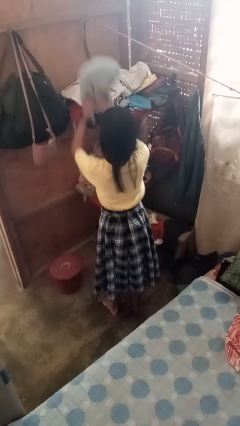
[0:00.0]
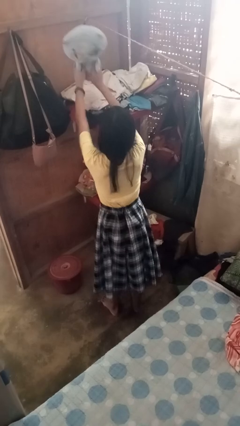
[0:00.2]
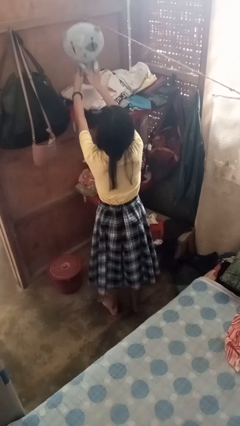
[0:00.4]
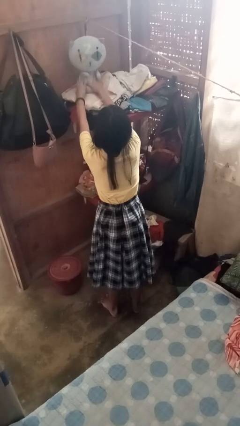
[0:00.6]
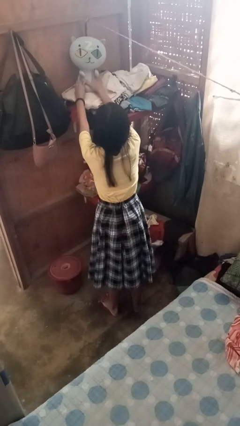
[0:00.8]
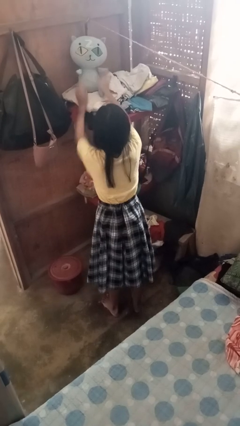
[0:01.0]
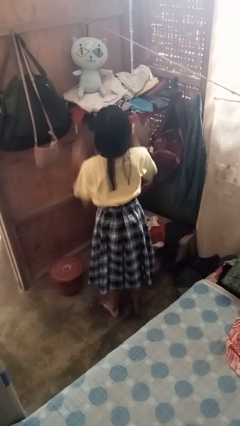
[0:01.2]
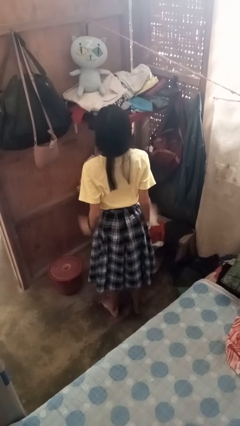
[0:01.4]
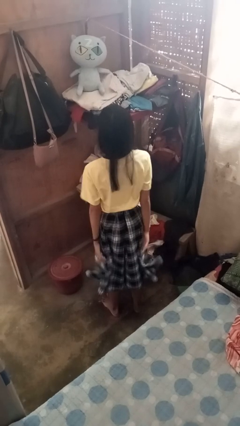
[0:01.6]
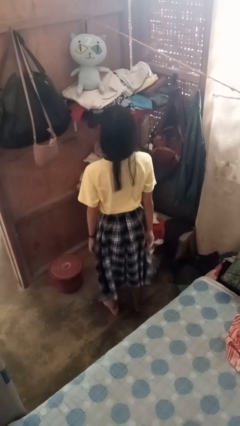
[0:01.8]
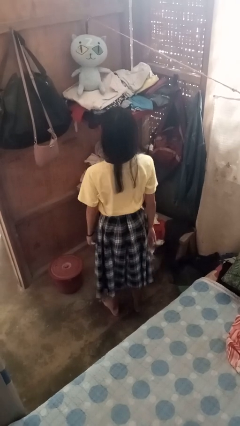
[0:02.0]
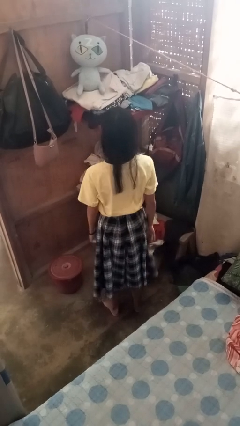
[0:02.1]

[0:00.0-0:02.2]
person puts down object on shelf

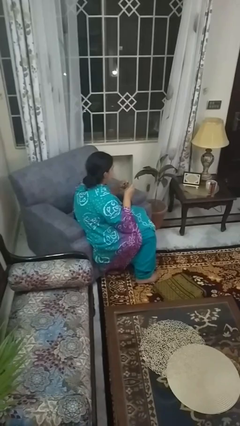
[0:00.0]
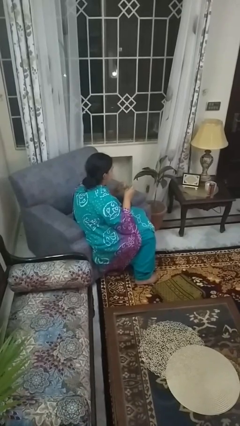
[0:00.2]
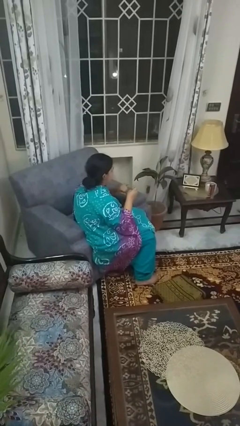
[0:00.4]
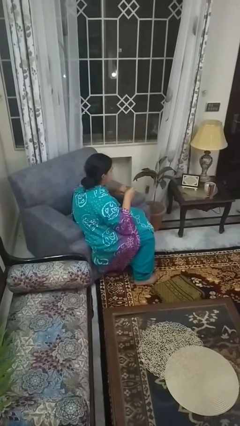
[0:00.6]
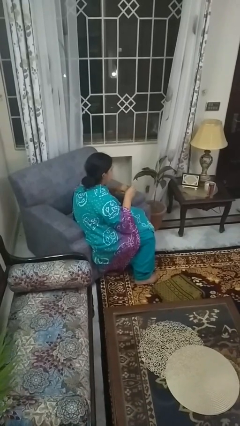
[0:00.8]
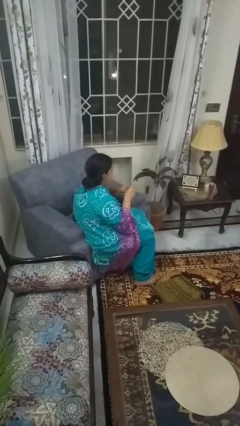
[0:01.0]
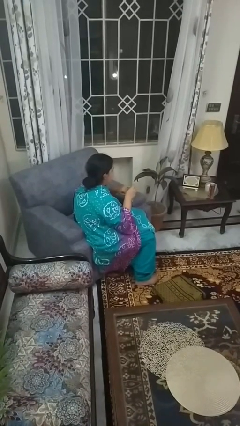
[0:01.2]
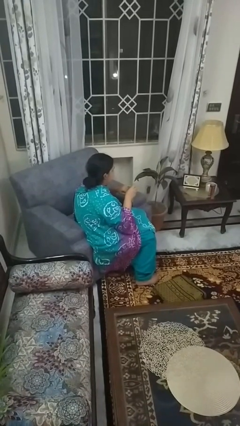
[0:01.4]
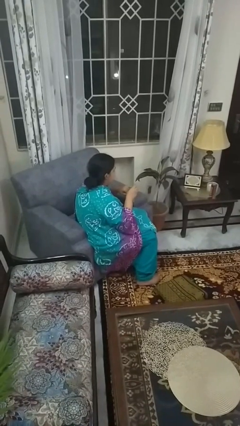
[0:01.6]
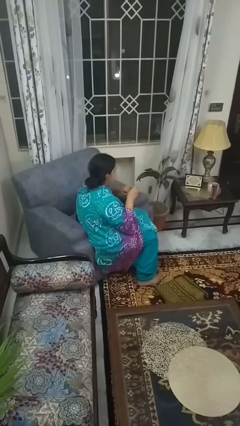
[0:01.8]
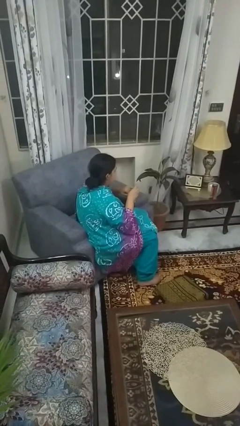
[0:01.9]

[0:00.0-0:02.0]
person files fingernails

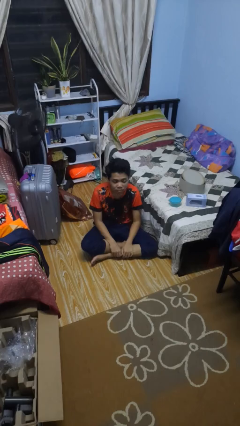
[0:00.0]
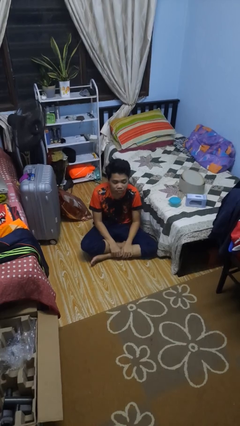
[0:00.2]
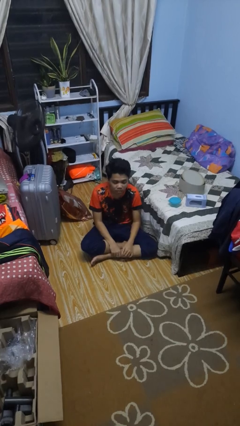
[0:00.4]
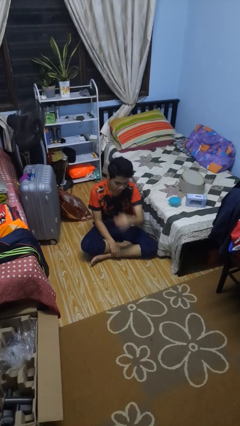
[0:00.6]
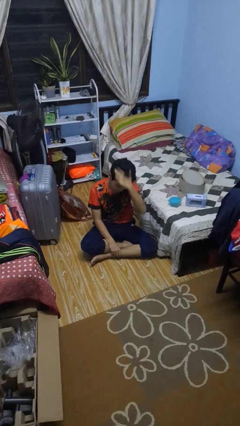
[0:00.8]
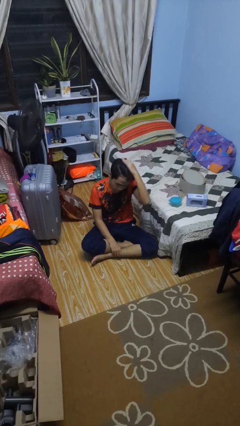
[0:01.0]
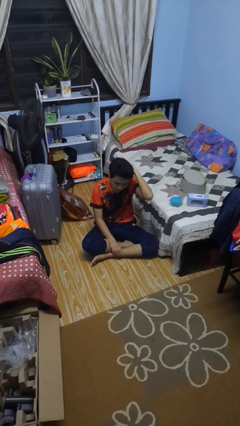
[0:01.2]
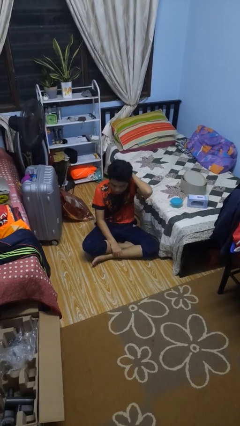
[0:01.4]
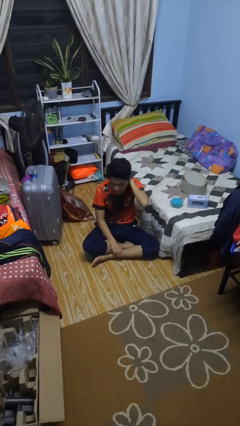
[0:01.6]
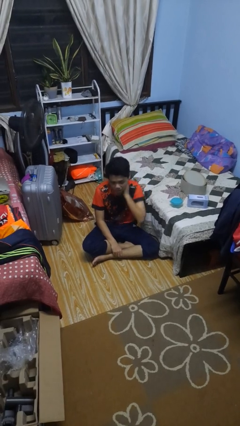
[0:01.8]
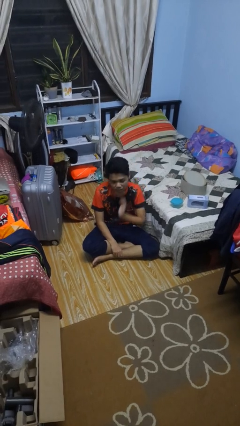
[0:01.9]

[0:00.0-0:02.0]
person strokes hair

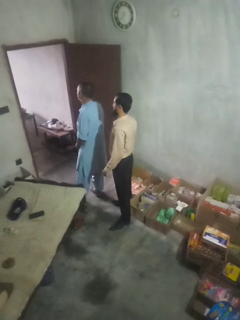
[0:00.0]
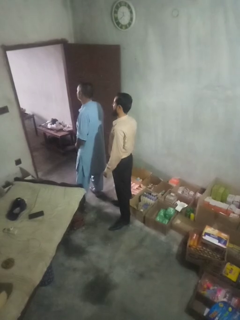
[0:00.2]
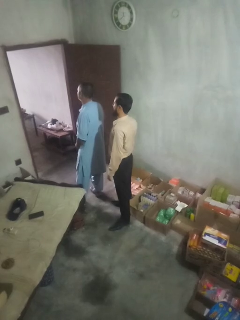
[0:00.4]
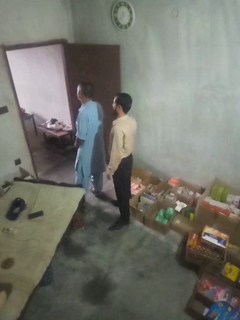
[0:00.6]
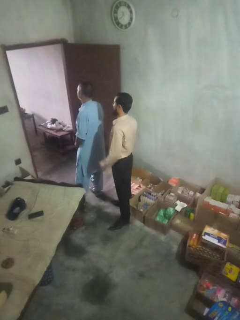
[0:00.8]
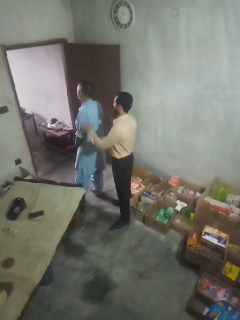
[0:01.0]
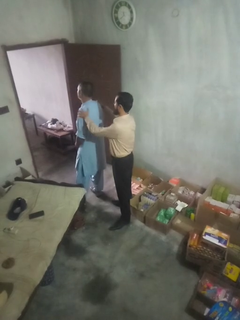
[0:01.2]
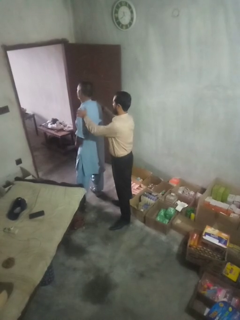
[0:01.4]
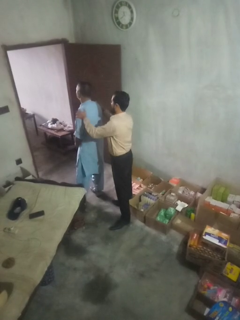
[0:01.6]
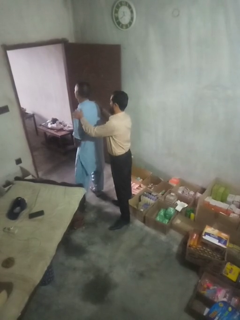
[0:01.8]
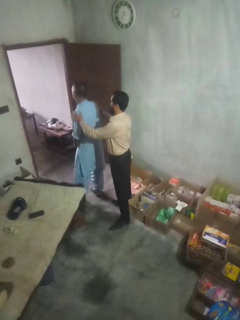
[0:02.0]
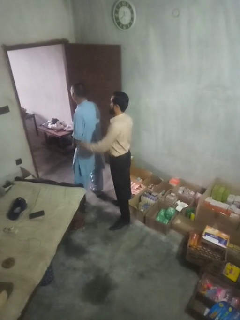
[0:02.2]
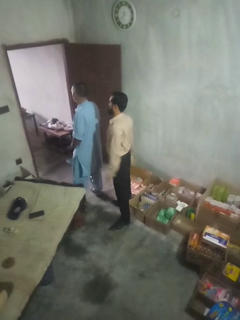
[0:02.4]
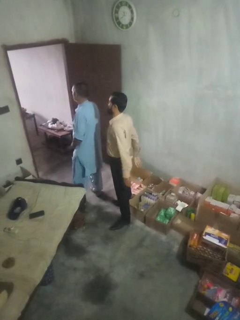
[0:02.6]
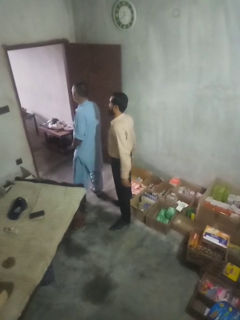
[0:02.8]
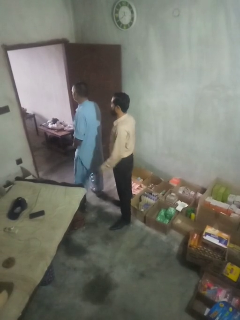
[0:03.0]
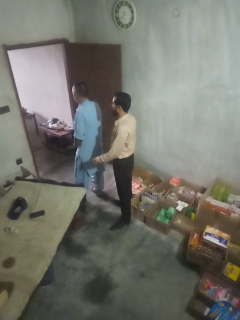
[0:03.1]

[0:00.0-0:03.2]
person pounds shoulders of person

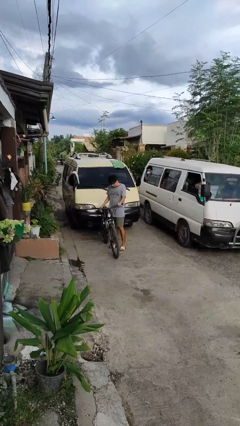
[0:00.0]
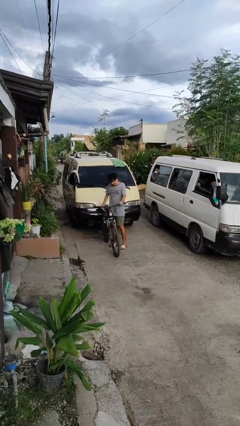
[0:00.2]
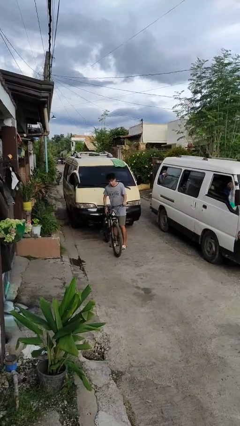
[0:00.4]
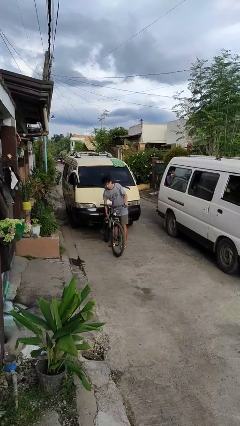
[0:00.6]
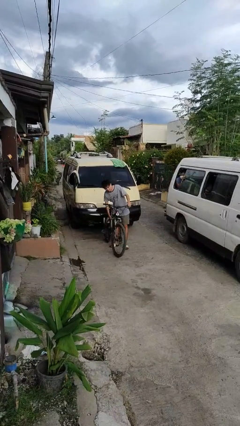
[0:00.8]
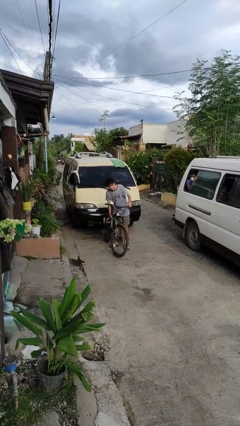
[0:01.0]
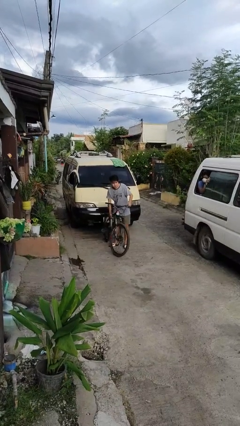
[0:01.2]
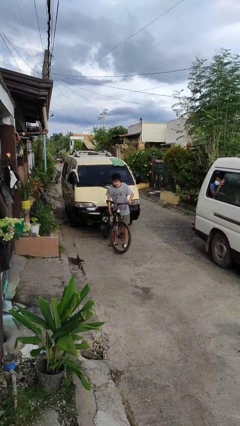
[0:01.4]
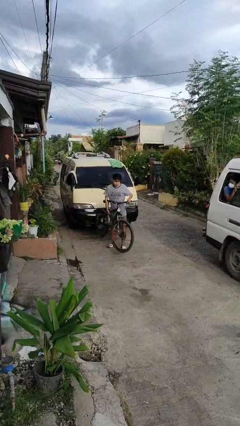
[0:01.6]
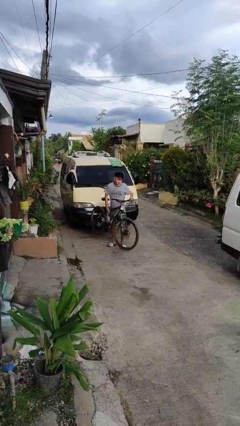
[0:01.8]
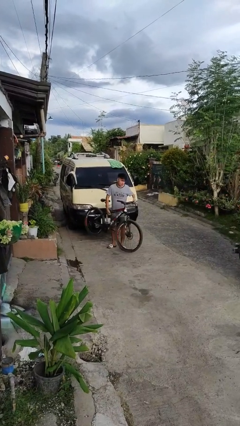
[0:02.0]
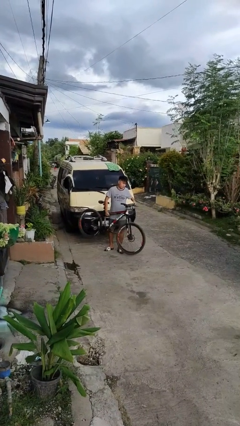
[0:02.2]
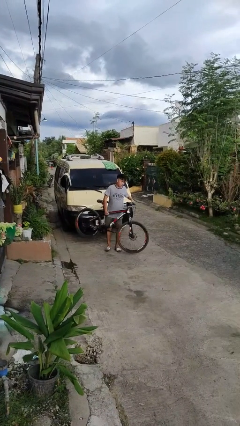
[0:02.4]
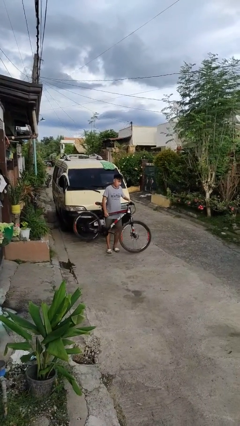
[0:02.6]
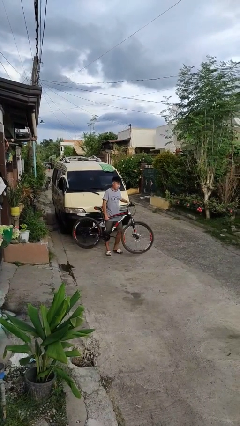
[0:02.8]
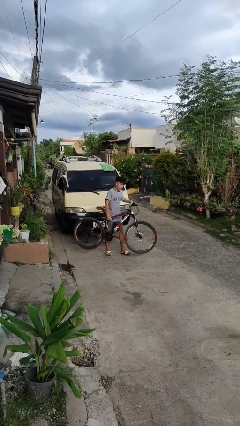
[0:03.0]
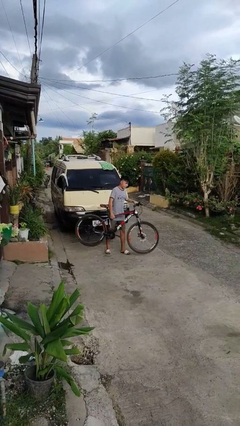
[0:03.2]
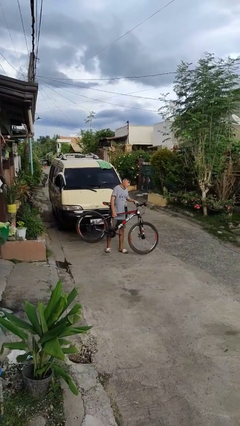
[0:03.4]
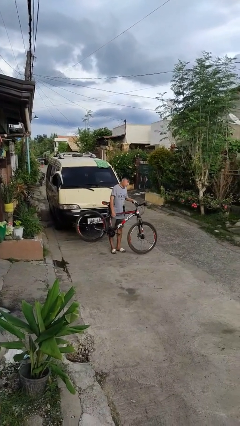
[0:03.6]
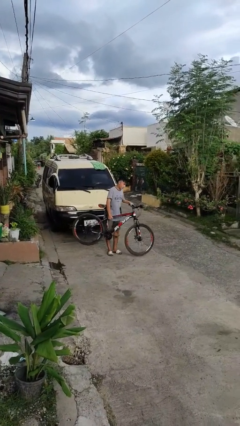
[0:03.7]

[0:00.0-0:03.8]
person carries bicycle

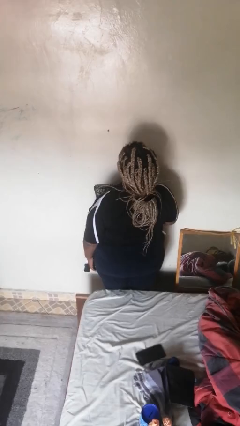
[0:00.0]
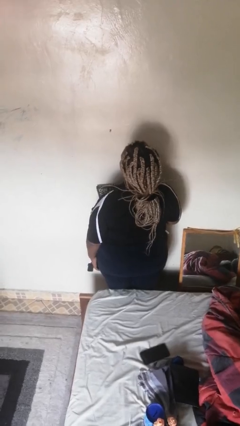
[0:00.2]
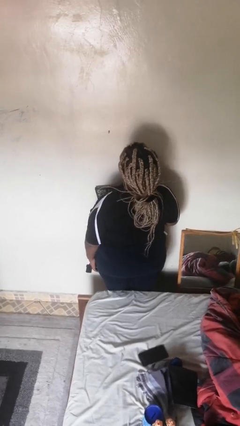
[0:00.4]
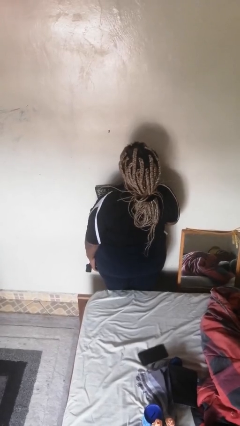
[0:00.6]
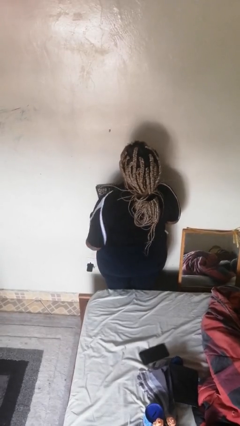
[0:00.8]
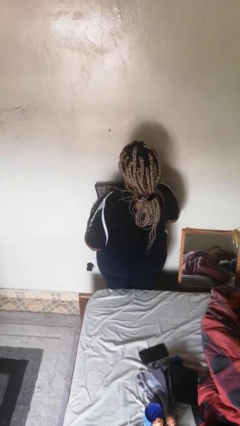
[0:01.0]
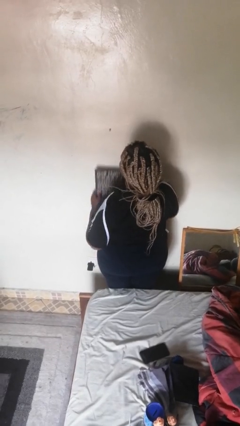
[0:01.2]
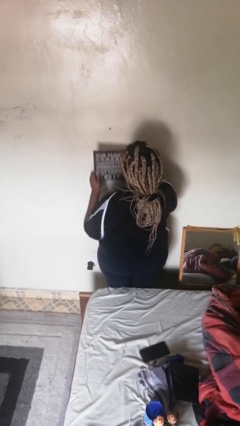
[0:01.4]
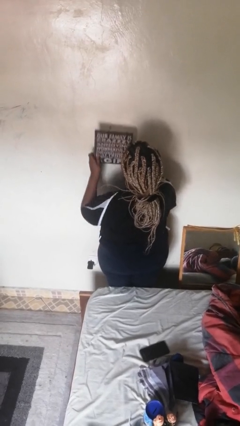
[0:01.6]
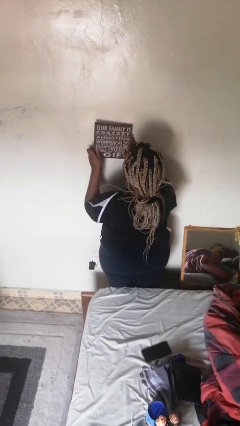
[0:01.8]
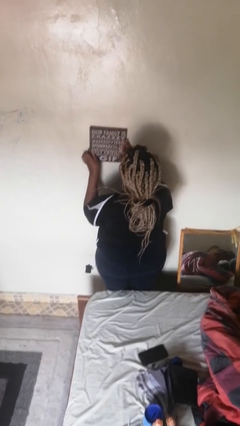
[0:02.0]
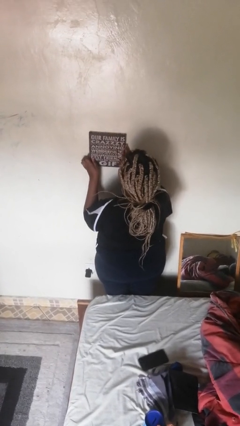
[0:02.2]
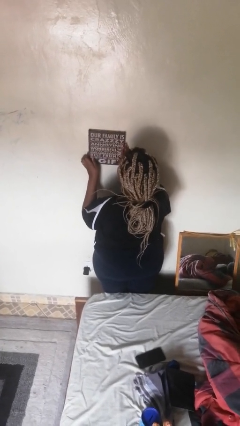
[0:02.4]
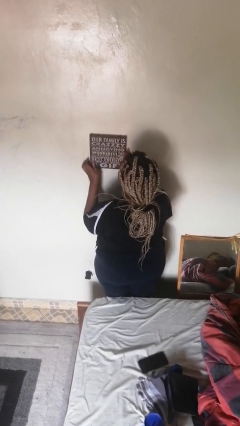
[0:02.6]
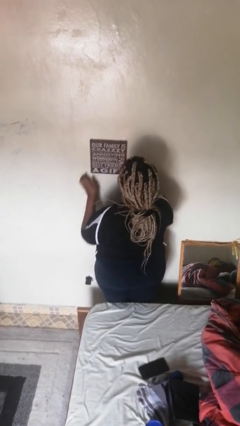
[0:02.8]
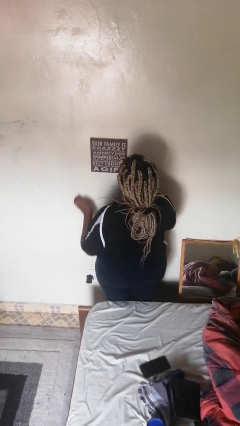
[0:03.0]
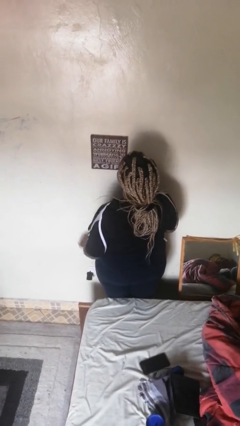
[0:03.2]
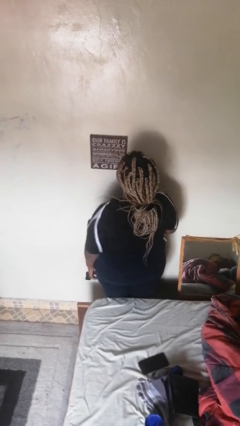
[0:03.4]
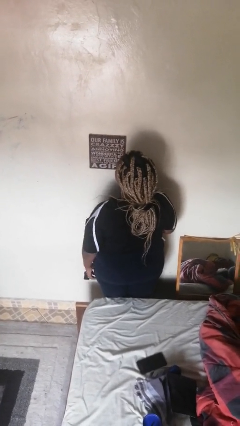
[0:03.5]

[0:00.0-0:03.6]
person puts up picture frame

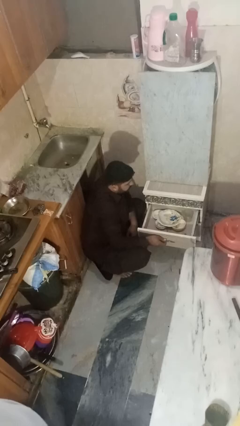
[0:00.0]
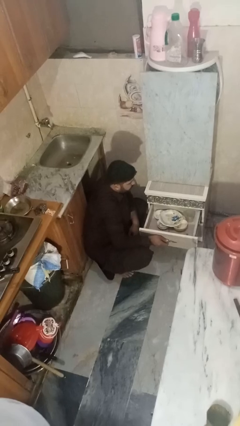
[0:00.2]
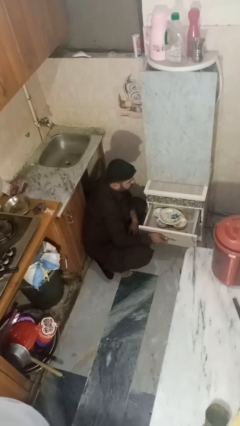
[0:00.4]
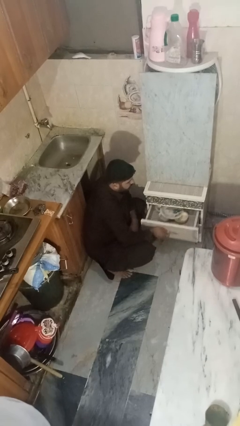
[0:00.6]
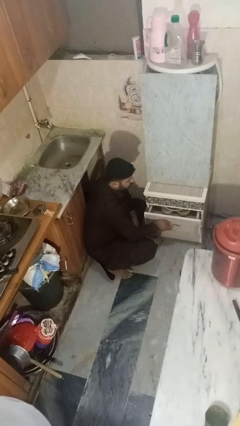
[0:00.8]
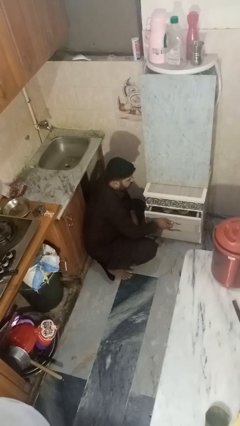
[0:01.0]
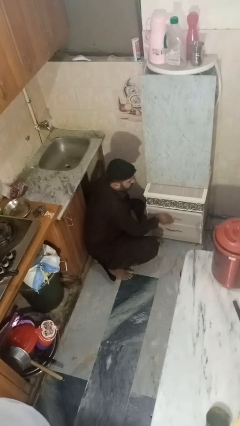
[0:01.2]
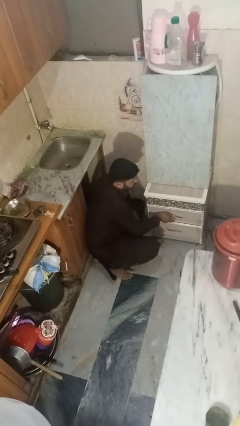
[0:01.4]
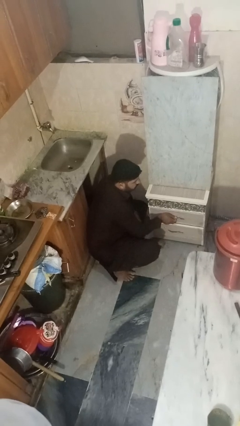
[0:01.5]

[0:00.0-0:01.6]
person closes kitchen drawer
